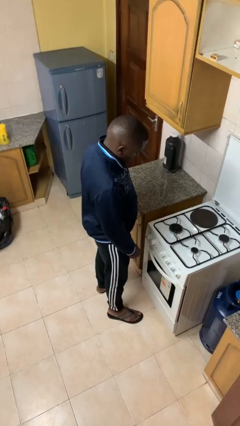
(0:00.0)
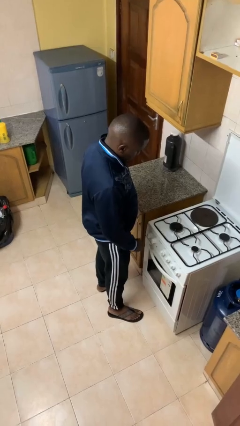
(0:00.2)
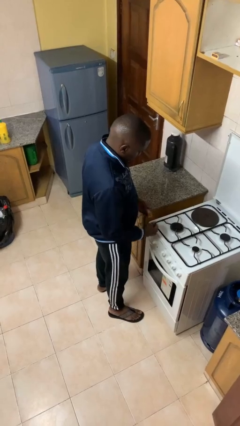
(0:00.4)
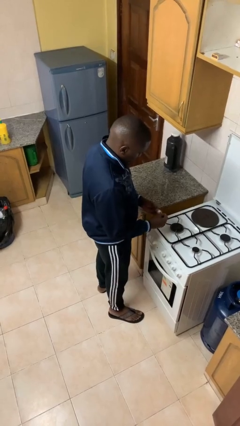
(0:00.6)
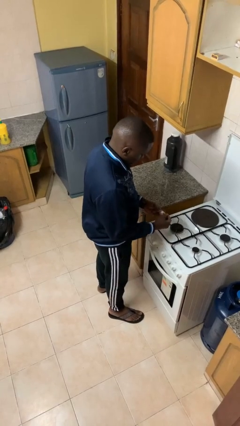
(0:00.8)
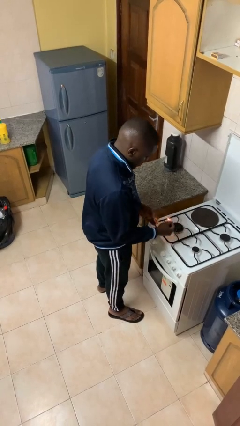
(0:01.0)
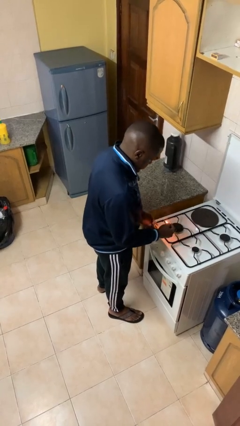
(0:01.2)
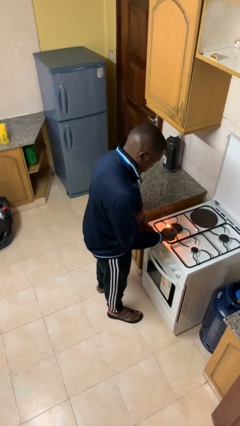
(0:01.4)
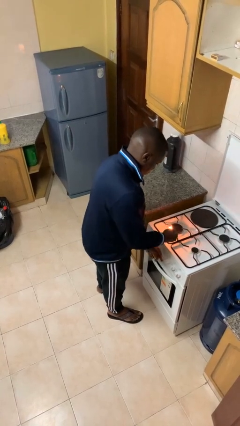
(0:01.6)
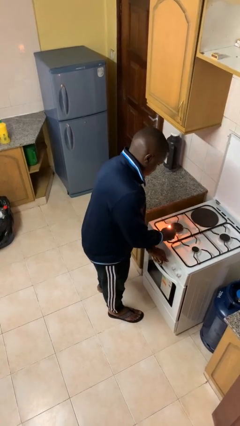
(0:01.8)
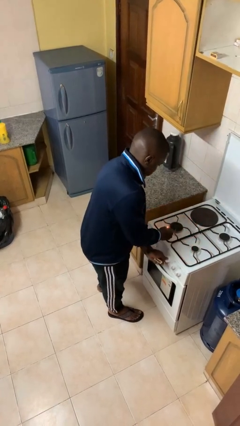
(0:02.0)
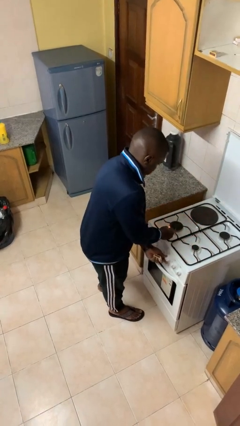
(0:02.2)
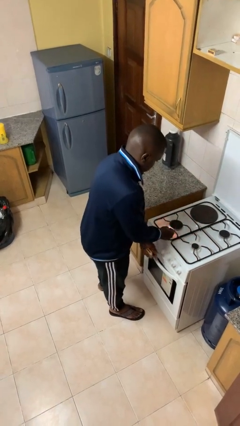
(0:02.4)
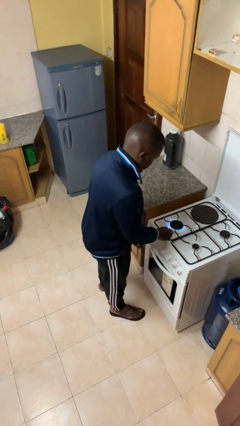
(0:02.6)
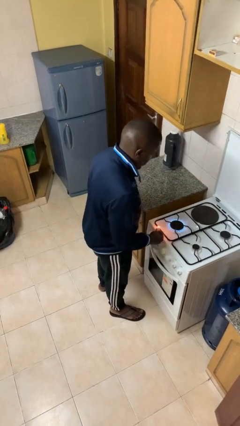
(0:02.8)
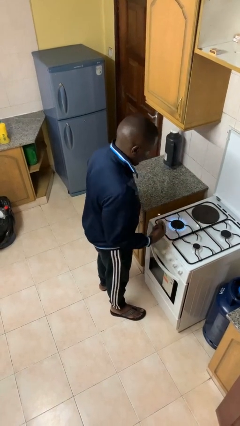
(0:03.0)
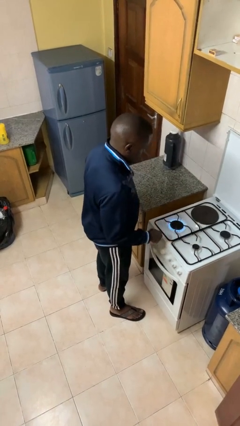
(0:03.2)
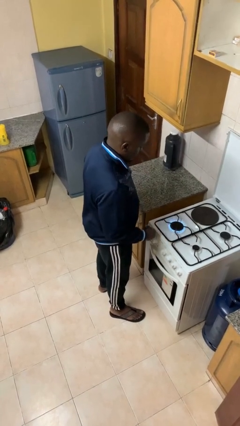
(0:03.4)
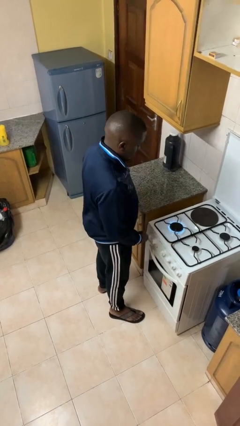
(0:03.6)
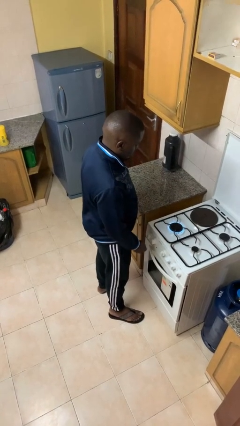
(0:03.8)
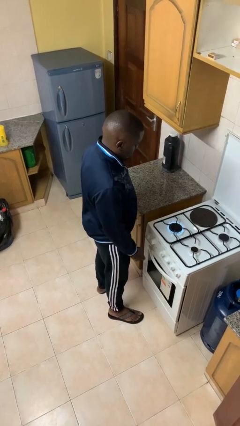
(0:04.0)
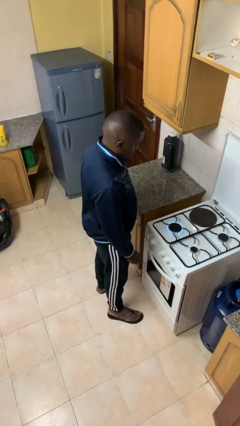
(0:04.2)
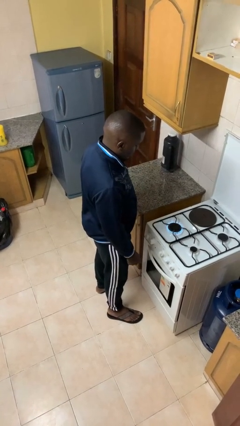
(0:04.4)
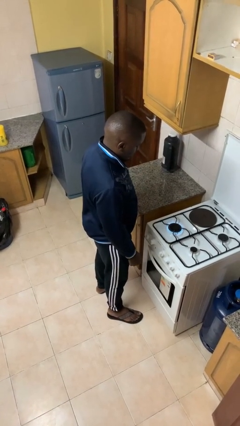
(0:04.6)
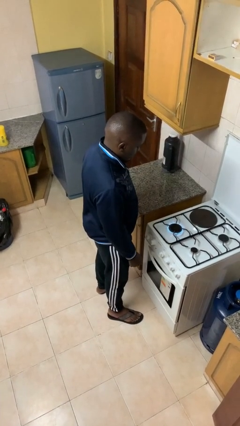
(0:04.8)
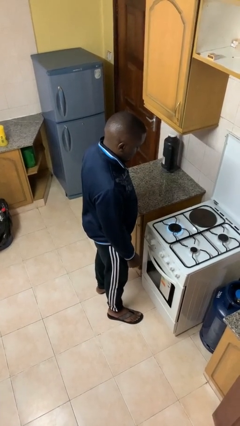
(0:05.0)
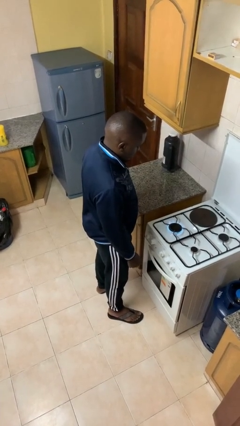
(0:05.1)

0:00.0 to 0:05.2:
person turns on stovetop

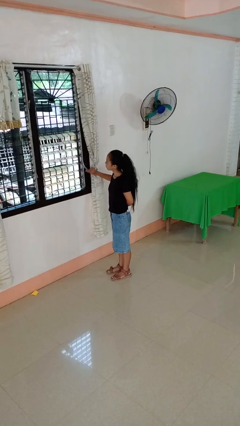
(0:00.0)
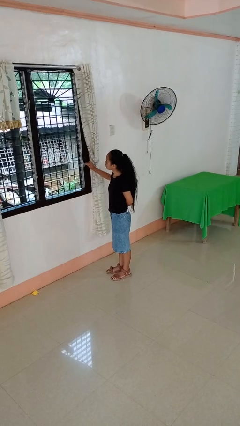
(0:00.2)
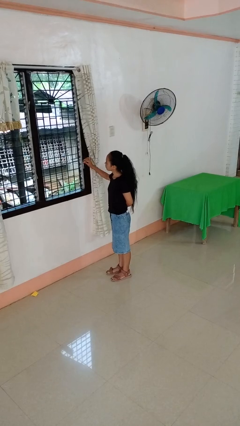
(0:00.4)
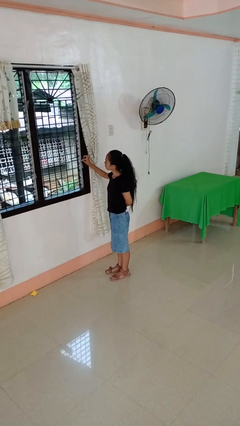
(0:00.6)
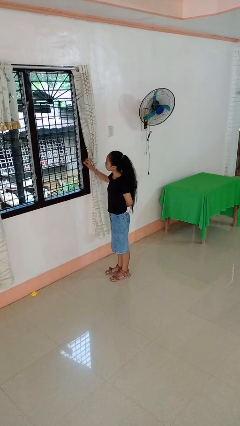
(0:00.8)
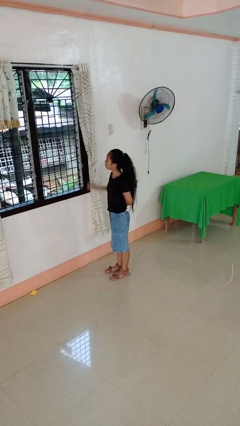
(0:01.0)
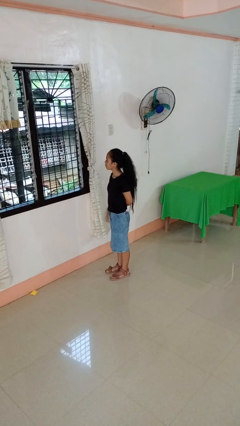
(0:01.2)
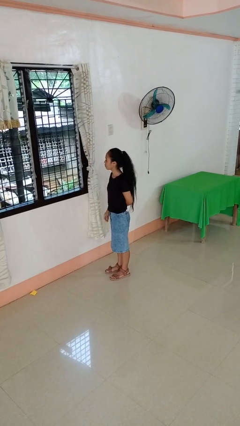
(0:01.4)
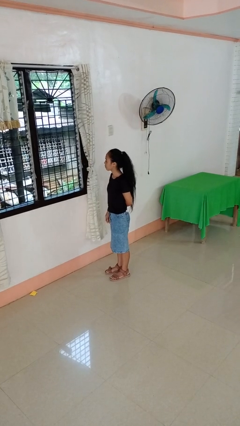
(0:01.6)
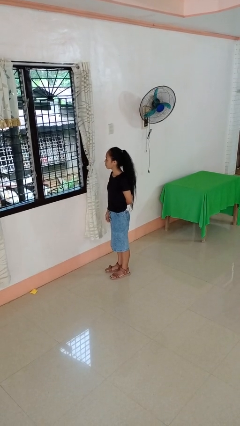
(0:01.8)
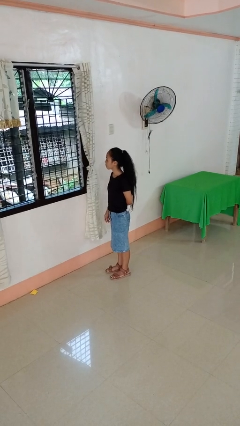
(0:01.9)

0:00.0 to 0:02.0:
person closes home window

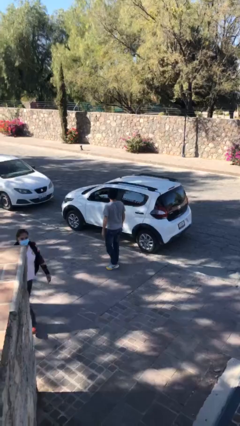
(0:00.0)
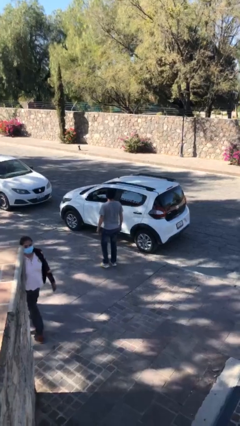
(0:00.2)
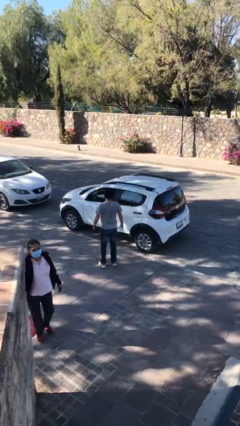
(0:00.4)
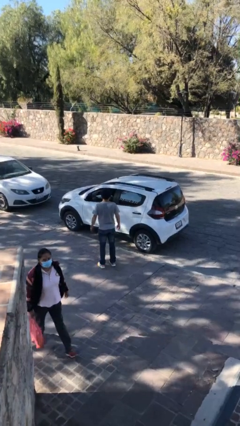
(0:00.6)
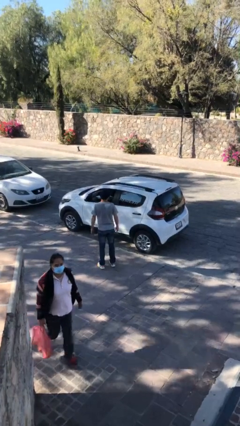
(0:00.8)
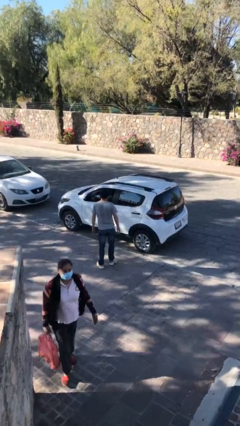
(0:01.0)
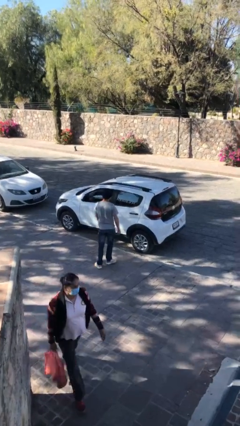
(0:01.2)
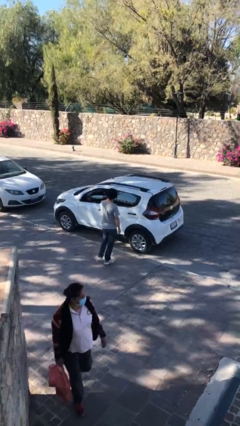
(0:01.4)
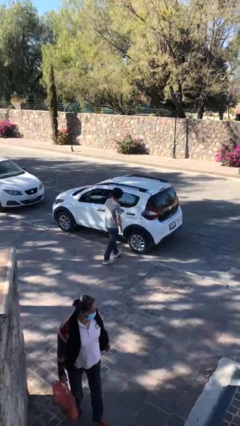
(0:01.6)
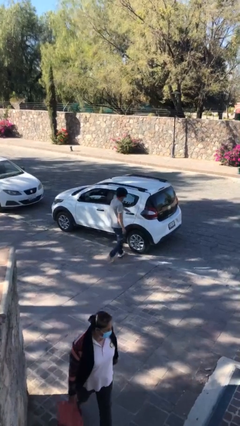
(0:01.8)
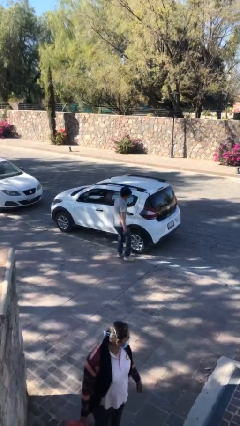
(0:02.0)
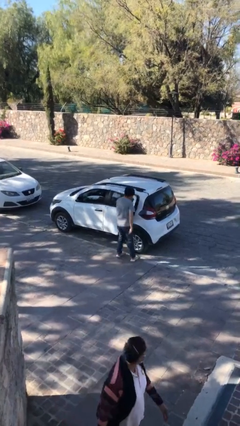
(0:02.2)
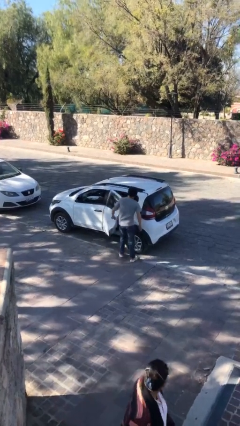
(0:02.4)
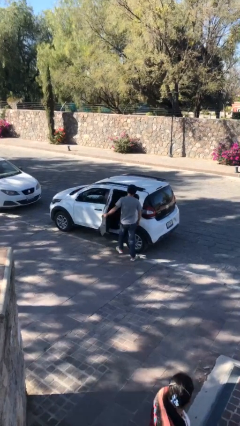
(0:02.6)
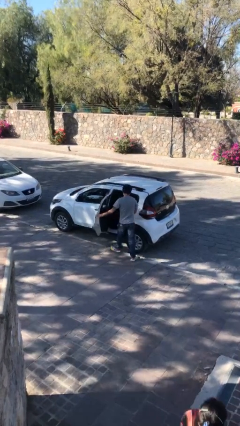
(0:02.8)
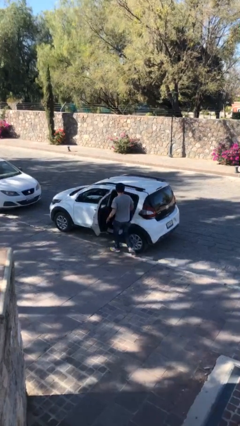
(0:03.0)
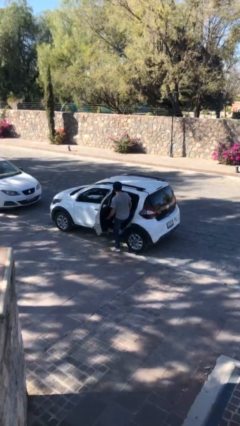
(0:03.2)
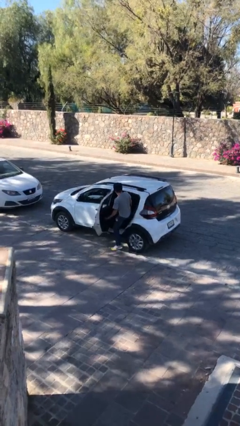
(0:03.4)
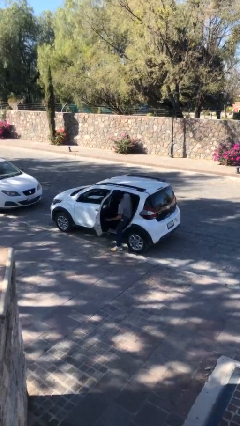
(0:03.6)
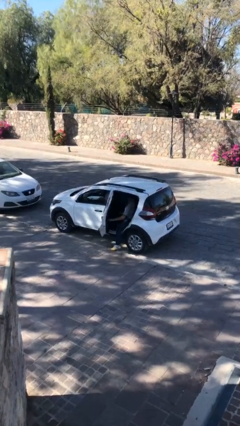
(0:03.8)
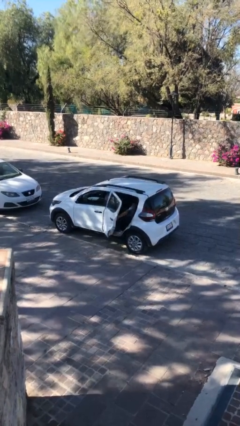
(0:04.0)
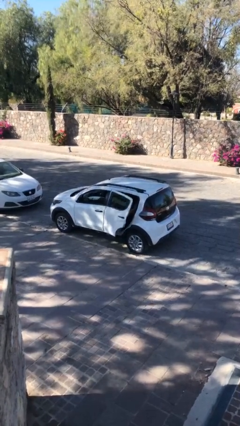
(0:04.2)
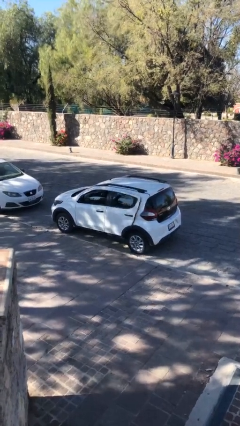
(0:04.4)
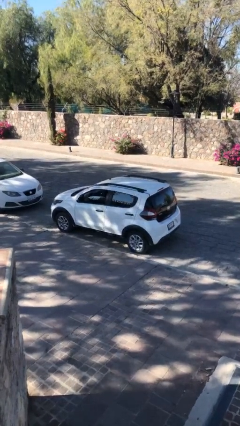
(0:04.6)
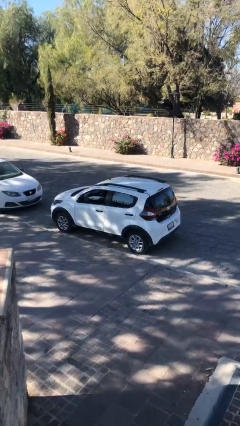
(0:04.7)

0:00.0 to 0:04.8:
car picks up person

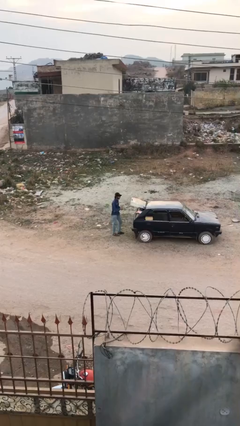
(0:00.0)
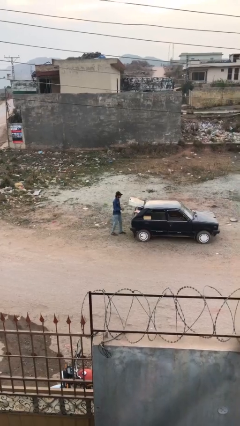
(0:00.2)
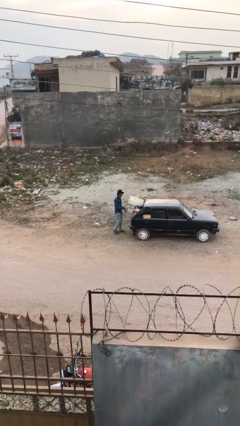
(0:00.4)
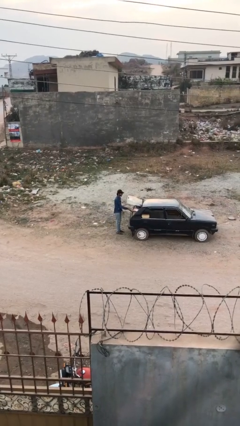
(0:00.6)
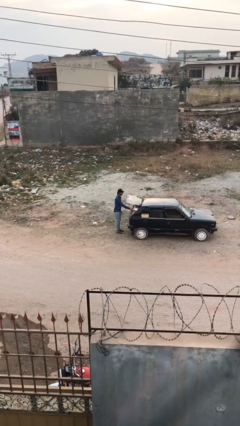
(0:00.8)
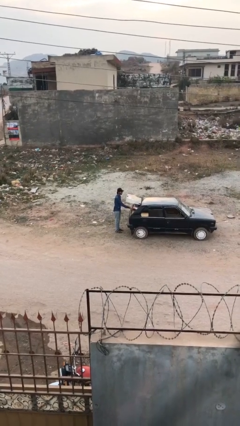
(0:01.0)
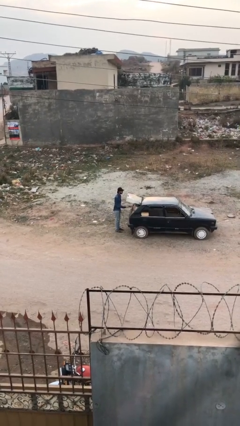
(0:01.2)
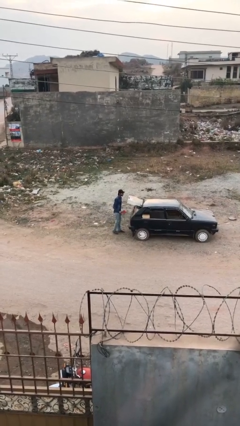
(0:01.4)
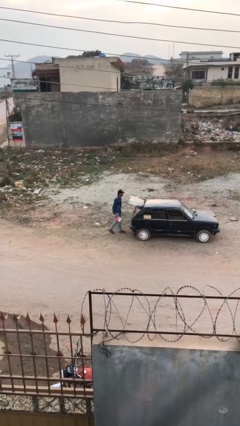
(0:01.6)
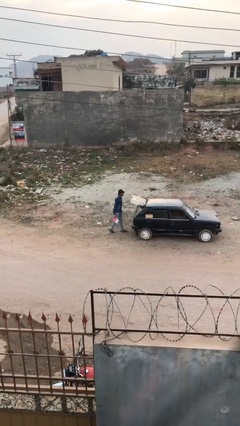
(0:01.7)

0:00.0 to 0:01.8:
person unloads car

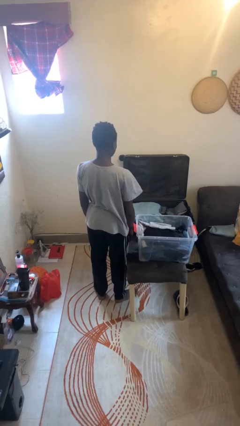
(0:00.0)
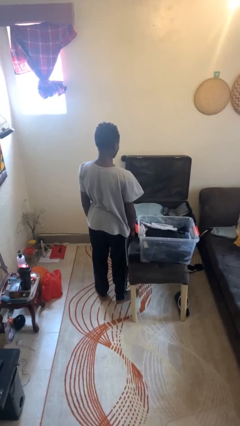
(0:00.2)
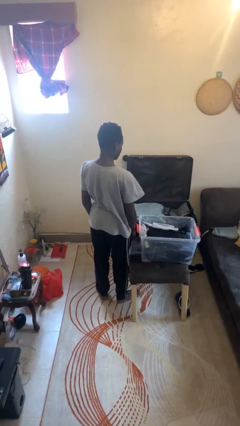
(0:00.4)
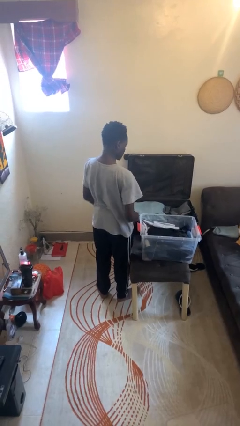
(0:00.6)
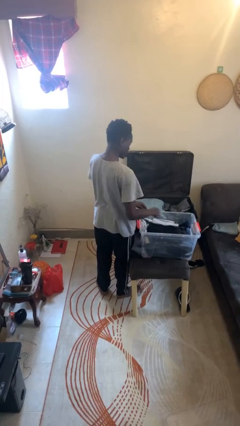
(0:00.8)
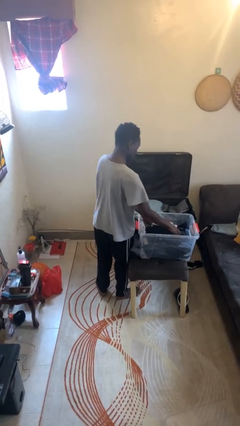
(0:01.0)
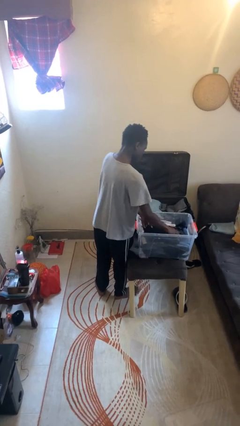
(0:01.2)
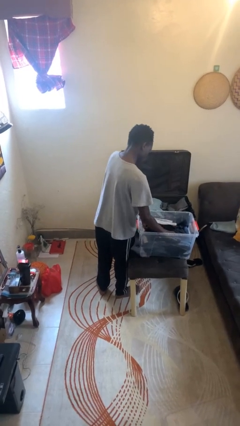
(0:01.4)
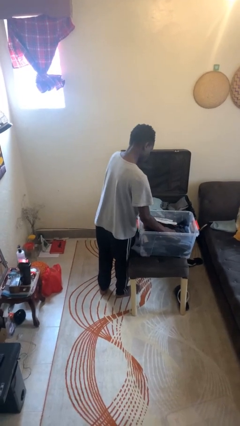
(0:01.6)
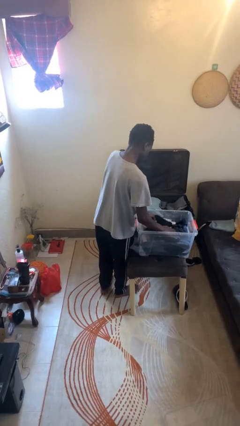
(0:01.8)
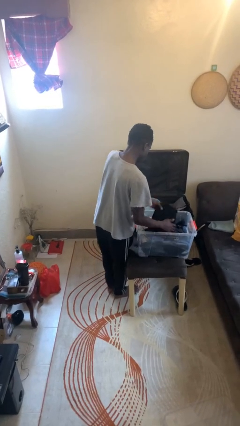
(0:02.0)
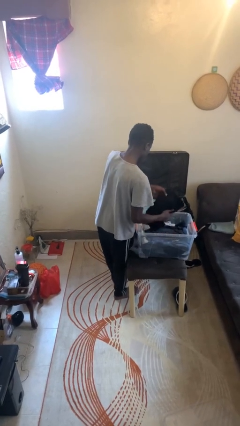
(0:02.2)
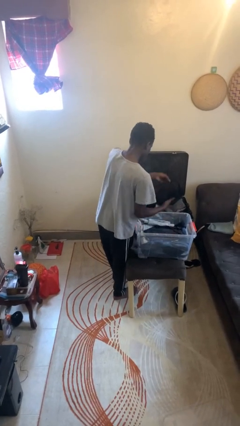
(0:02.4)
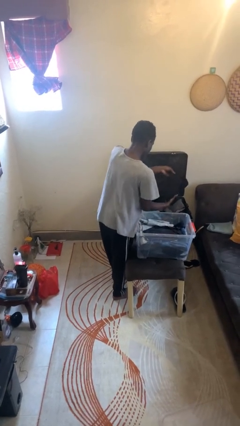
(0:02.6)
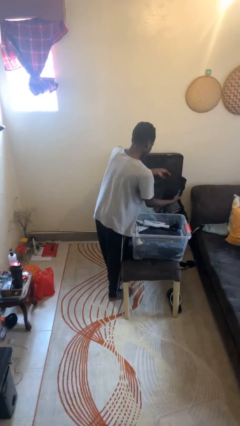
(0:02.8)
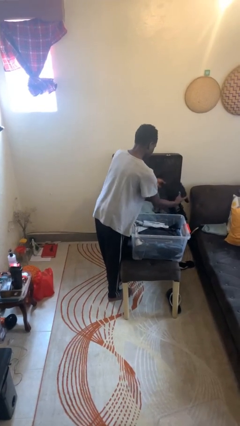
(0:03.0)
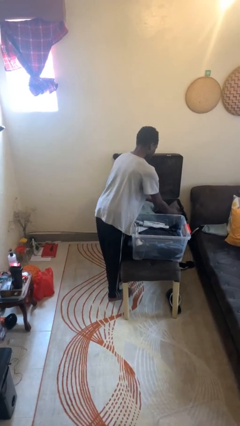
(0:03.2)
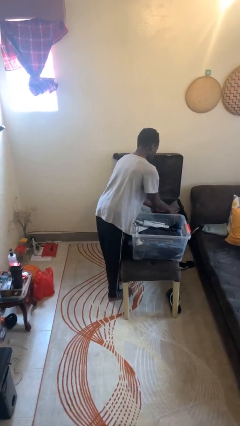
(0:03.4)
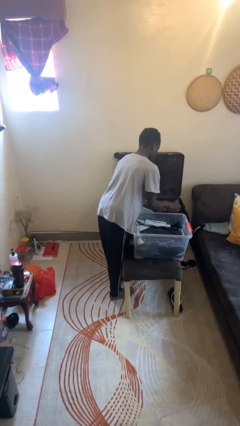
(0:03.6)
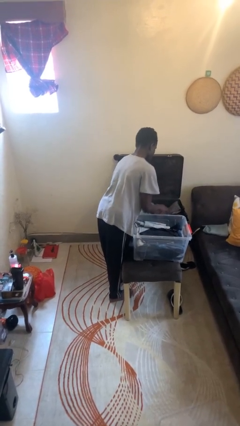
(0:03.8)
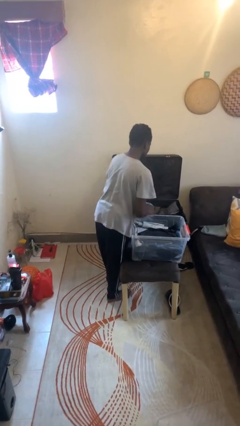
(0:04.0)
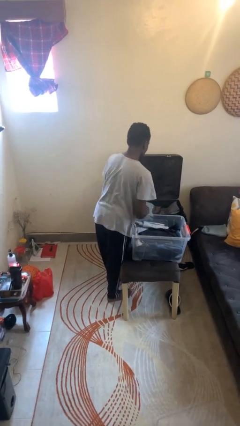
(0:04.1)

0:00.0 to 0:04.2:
person loads clothes into suitcase
